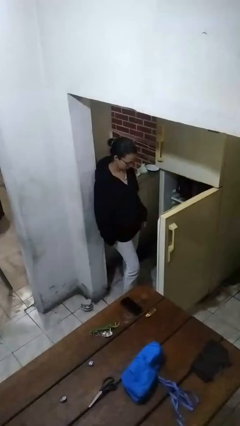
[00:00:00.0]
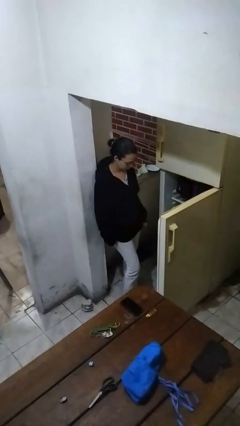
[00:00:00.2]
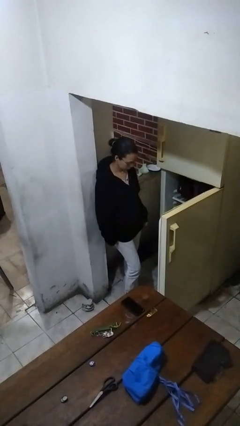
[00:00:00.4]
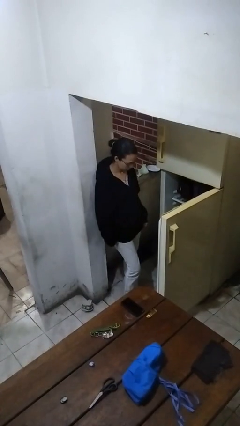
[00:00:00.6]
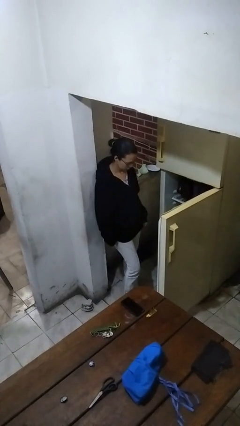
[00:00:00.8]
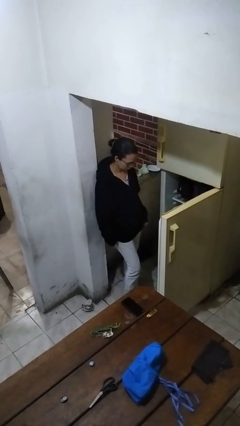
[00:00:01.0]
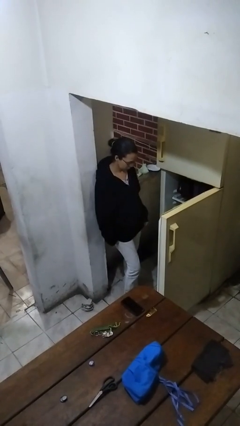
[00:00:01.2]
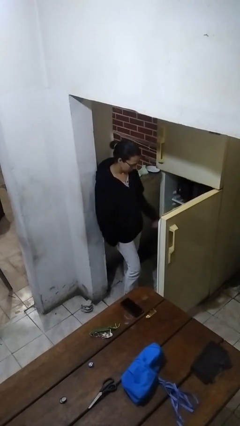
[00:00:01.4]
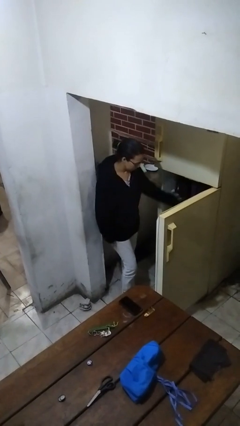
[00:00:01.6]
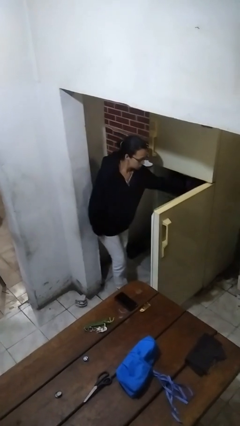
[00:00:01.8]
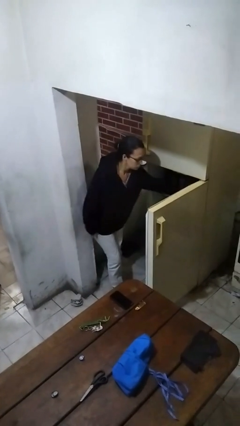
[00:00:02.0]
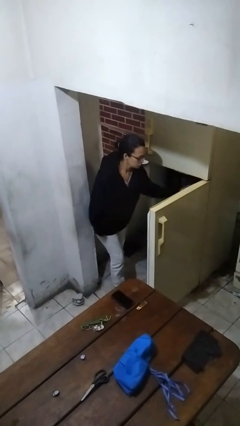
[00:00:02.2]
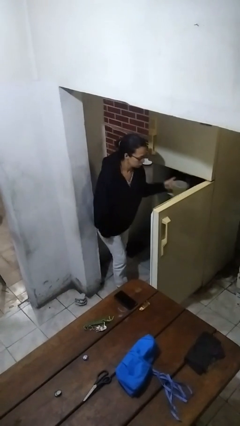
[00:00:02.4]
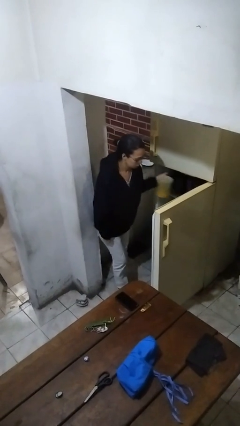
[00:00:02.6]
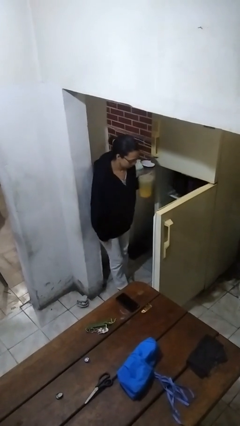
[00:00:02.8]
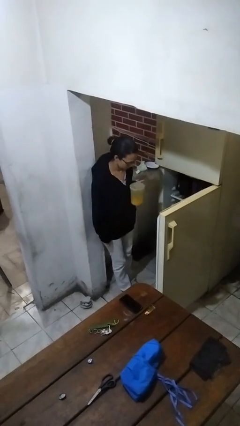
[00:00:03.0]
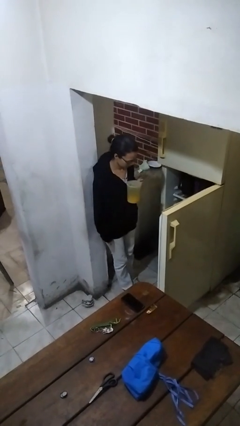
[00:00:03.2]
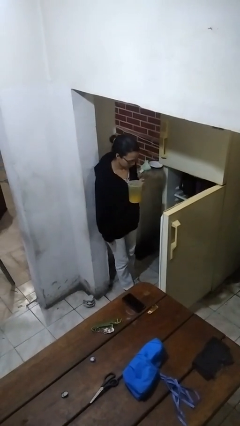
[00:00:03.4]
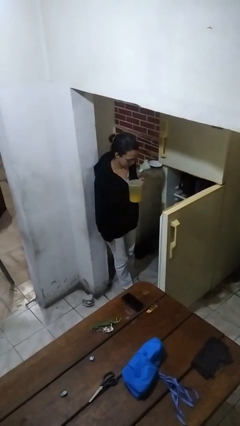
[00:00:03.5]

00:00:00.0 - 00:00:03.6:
person takes object from refrigerator

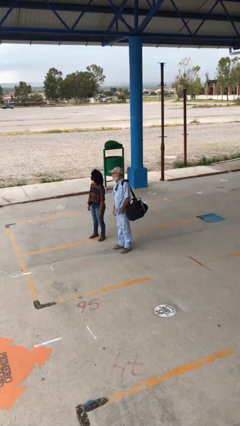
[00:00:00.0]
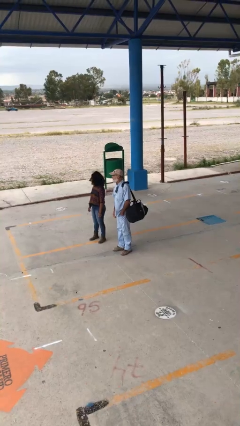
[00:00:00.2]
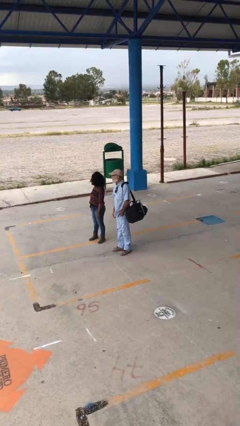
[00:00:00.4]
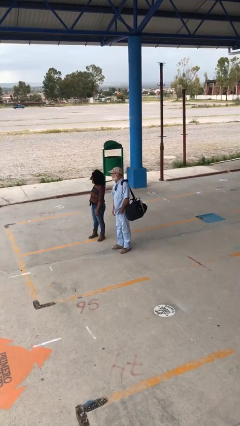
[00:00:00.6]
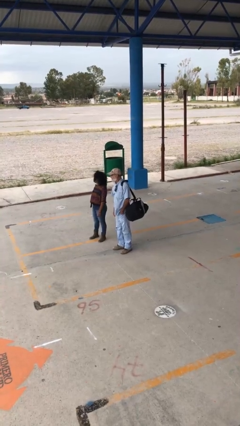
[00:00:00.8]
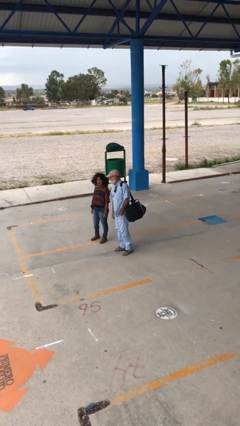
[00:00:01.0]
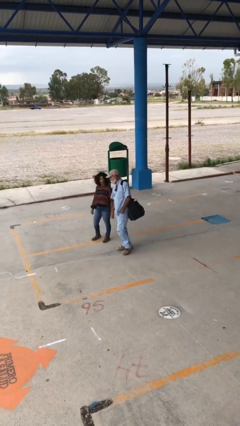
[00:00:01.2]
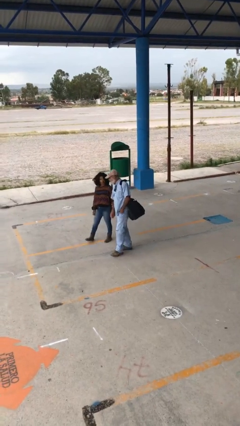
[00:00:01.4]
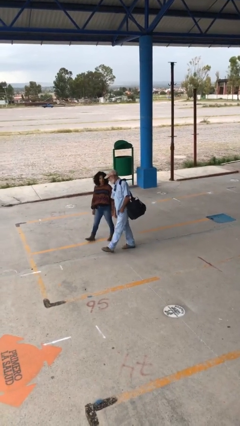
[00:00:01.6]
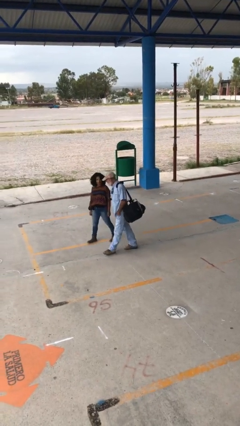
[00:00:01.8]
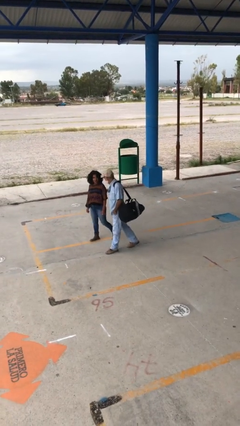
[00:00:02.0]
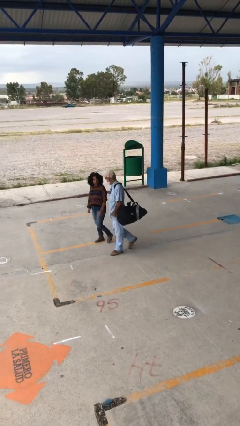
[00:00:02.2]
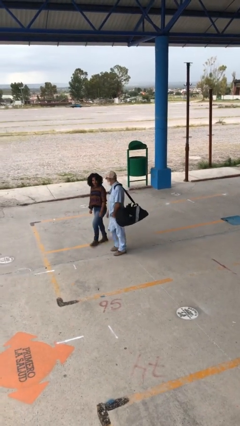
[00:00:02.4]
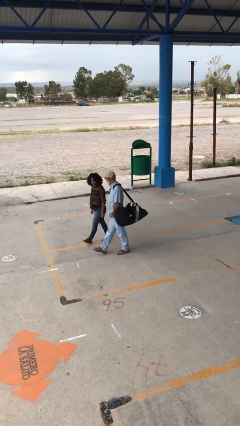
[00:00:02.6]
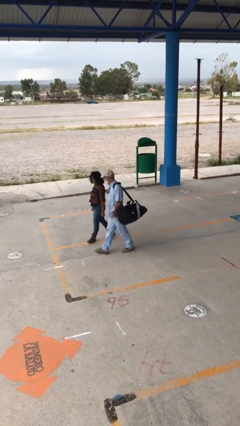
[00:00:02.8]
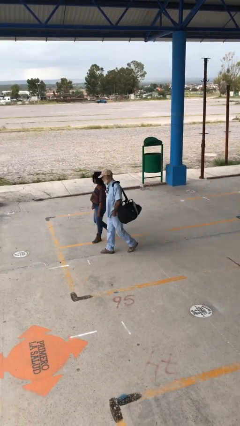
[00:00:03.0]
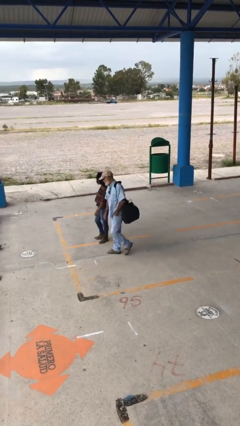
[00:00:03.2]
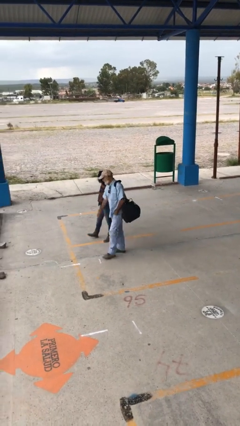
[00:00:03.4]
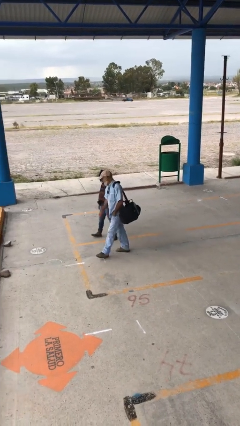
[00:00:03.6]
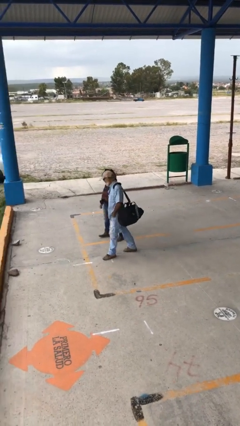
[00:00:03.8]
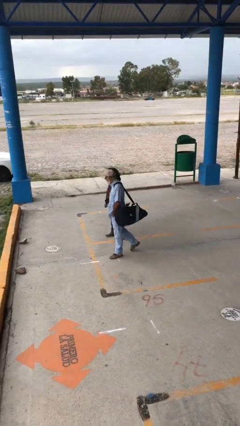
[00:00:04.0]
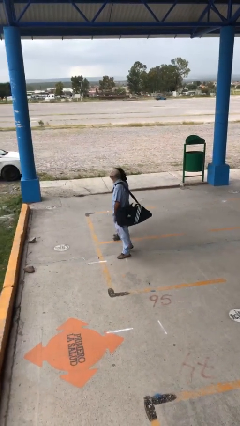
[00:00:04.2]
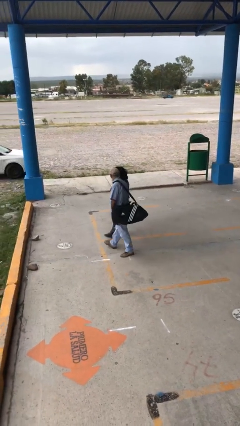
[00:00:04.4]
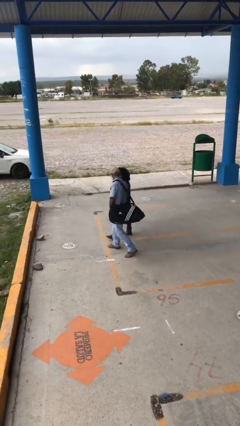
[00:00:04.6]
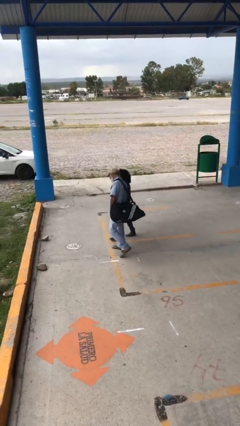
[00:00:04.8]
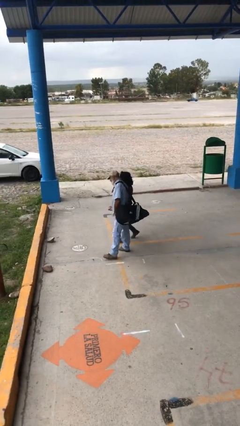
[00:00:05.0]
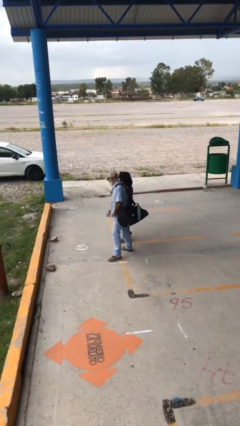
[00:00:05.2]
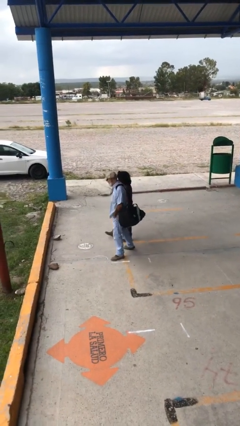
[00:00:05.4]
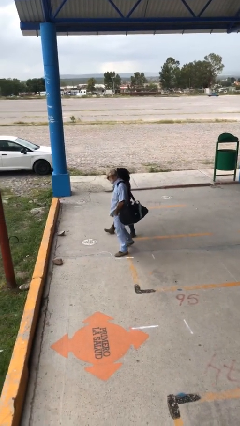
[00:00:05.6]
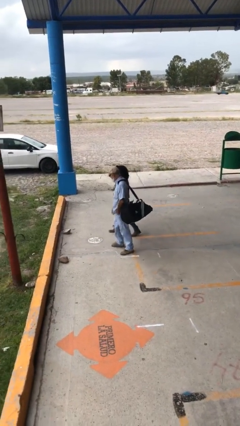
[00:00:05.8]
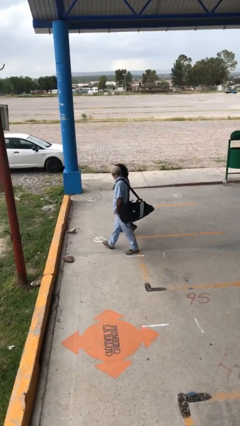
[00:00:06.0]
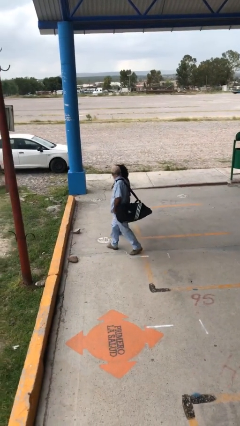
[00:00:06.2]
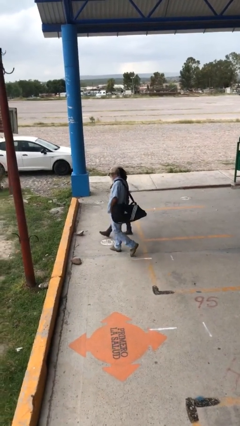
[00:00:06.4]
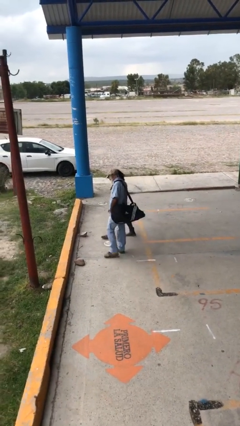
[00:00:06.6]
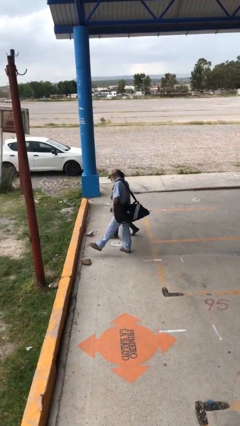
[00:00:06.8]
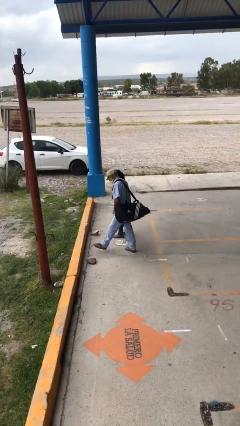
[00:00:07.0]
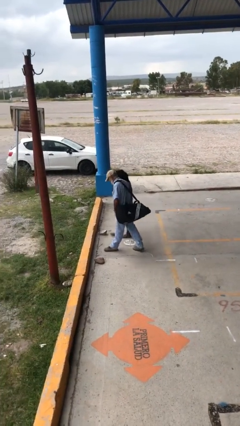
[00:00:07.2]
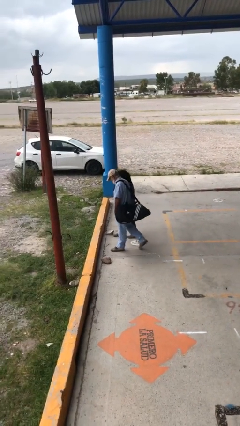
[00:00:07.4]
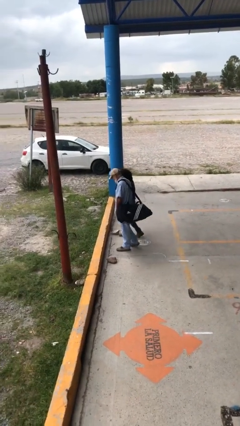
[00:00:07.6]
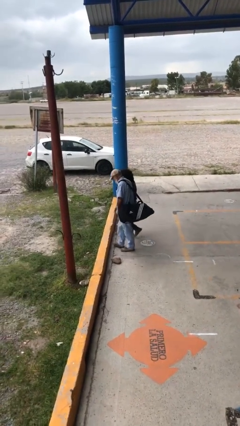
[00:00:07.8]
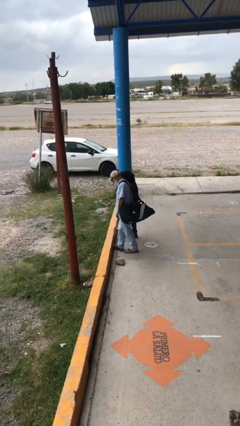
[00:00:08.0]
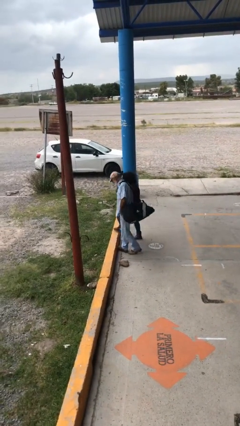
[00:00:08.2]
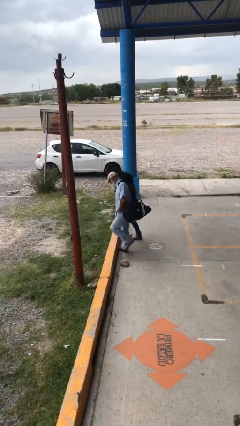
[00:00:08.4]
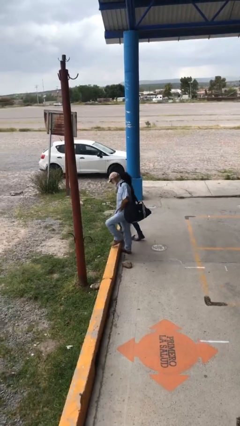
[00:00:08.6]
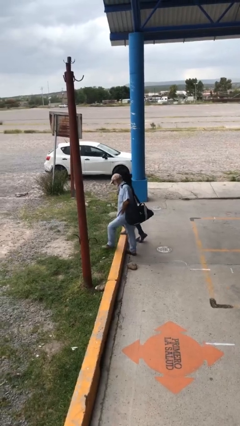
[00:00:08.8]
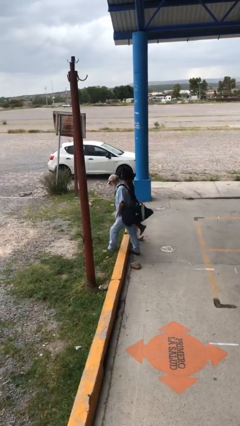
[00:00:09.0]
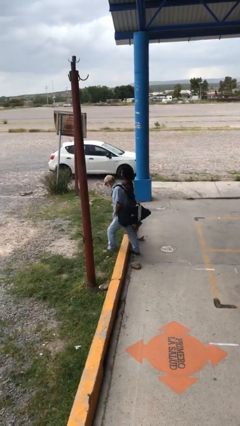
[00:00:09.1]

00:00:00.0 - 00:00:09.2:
person talks to person

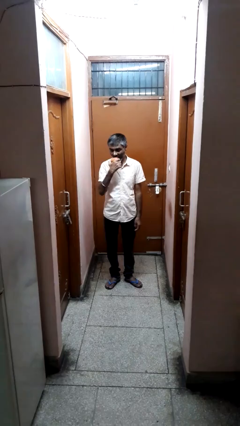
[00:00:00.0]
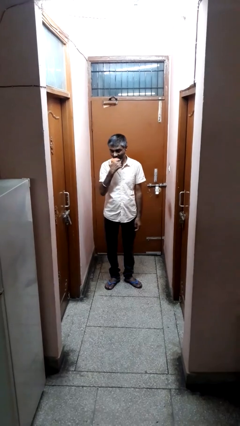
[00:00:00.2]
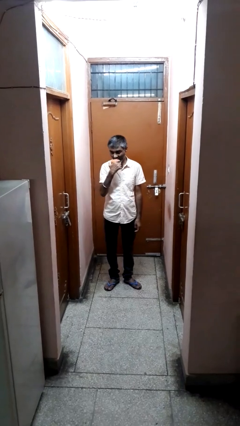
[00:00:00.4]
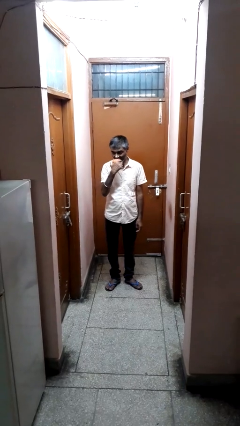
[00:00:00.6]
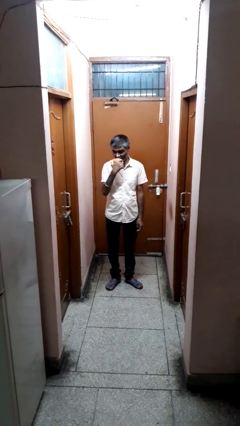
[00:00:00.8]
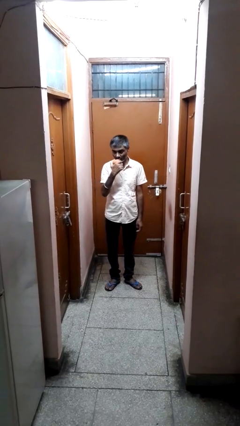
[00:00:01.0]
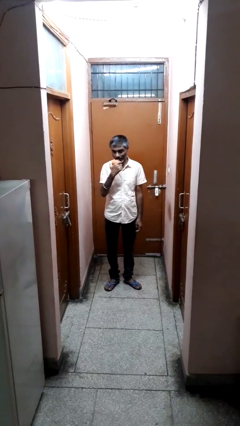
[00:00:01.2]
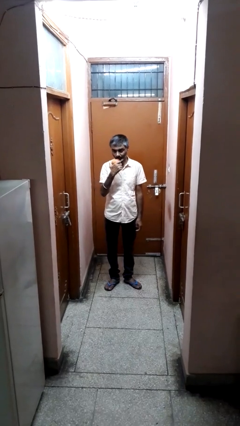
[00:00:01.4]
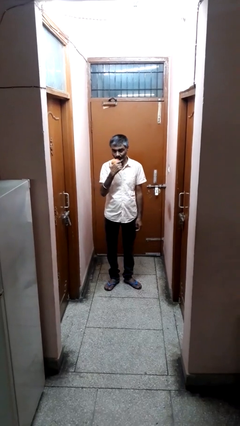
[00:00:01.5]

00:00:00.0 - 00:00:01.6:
person eats apple

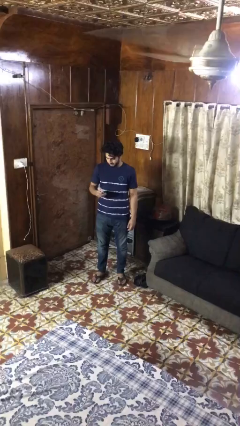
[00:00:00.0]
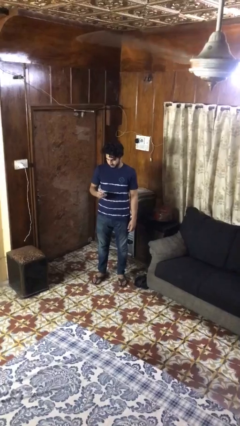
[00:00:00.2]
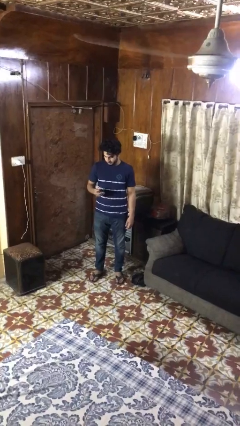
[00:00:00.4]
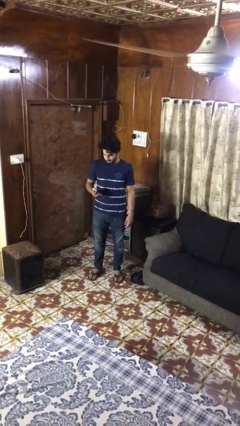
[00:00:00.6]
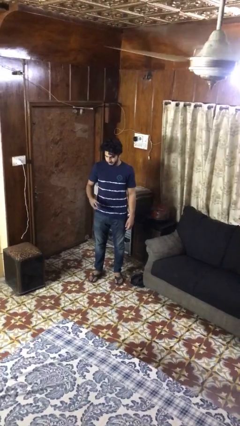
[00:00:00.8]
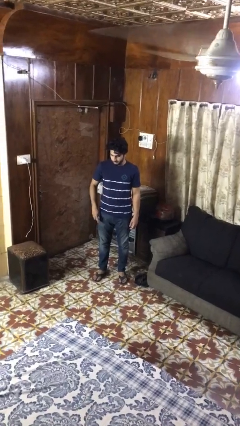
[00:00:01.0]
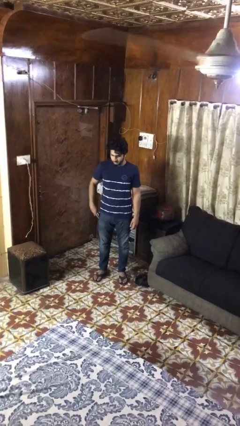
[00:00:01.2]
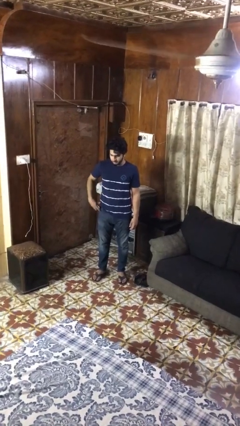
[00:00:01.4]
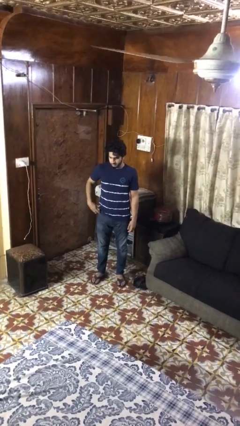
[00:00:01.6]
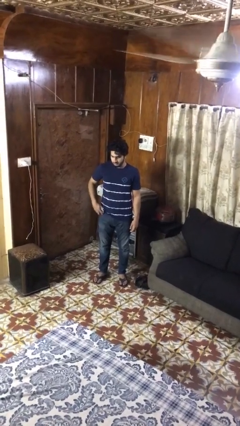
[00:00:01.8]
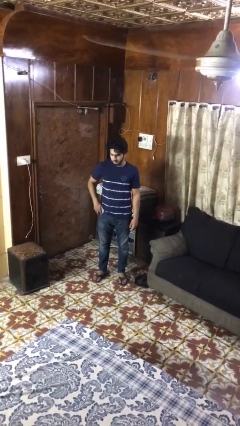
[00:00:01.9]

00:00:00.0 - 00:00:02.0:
person puts phone into pocket

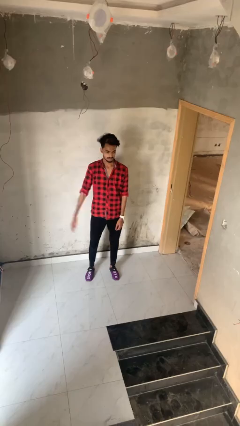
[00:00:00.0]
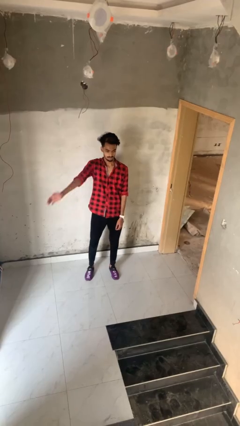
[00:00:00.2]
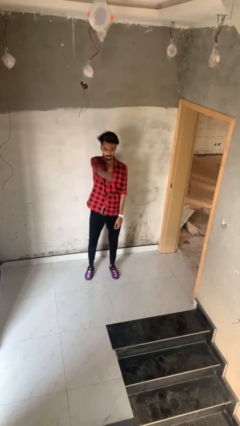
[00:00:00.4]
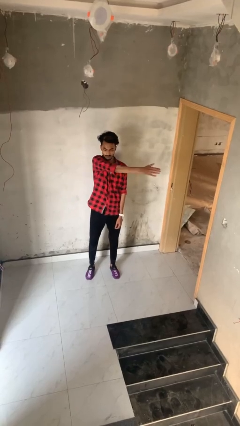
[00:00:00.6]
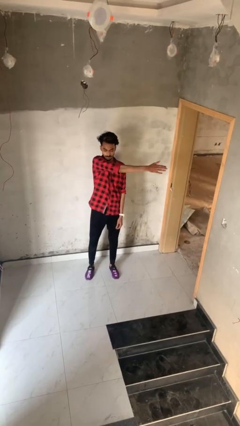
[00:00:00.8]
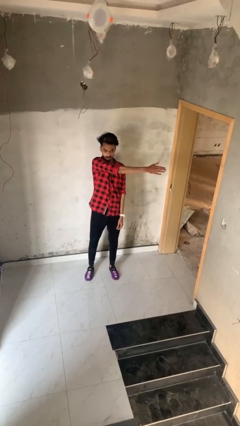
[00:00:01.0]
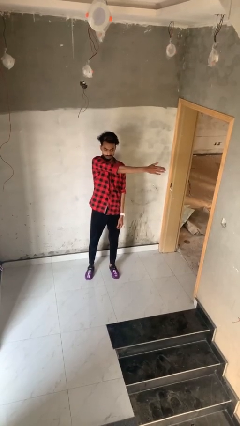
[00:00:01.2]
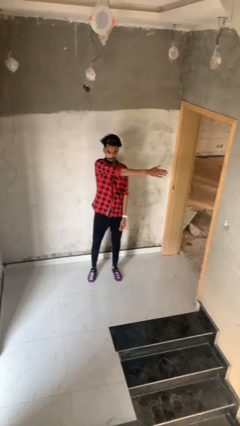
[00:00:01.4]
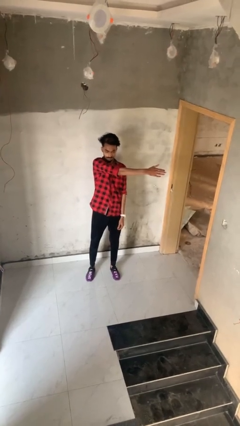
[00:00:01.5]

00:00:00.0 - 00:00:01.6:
person gestures swipe left
